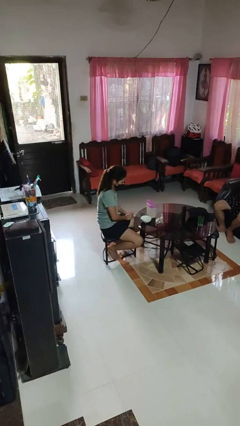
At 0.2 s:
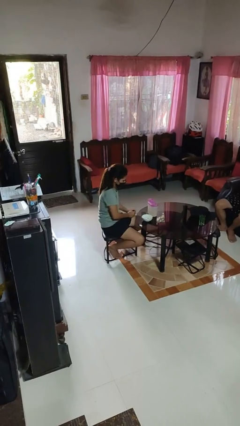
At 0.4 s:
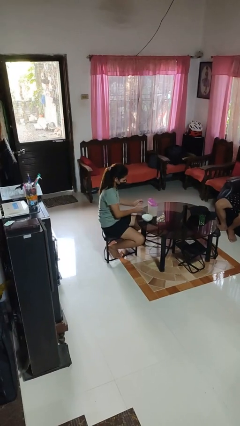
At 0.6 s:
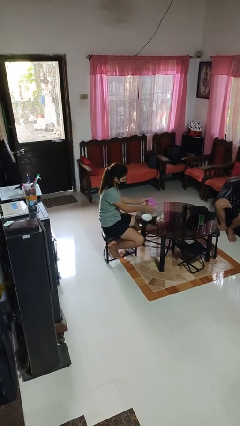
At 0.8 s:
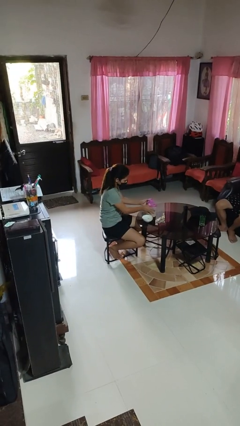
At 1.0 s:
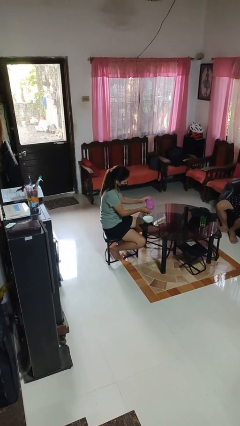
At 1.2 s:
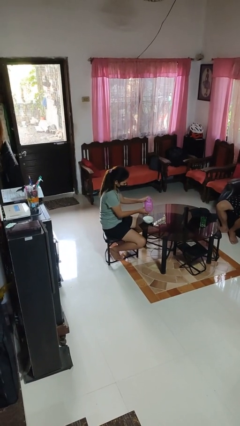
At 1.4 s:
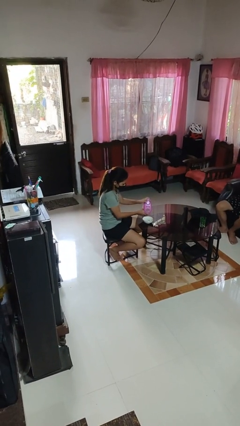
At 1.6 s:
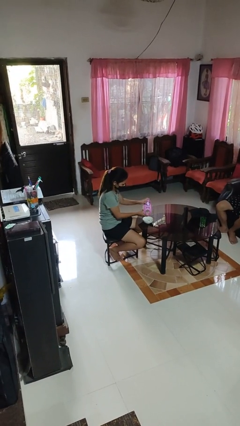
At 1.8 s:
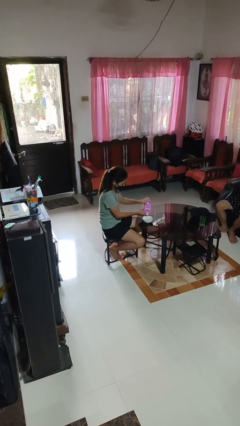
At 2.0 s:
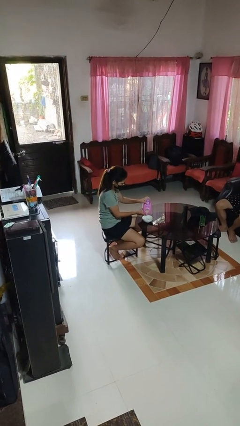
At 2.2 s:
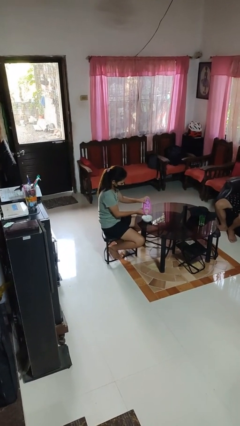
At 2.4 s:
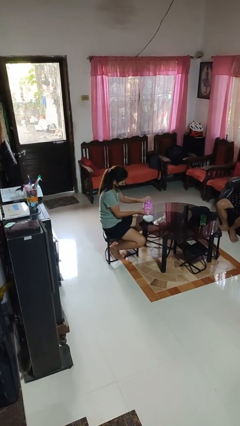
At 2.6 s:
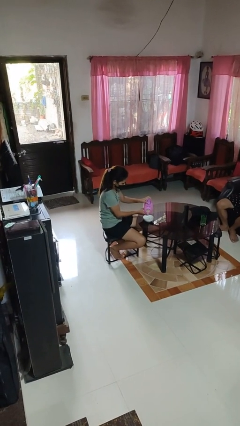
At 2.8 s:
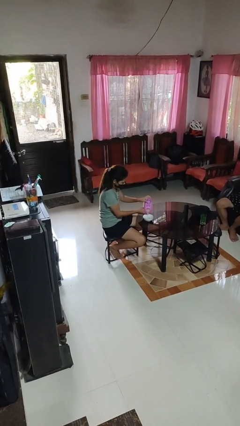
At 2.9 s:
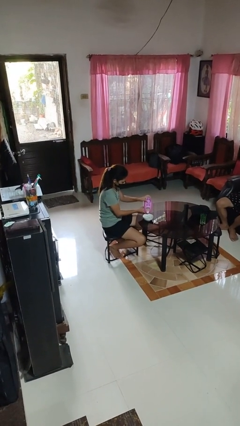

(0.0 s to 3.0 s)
person pours into bowl

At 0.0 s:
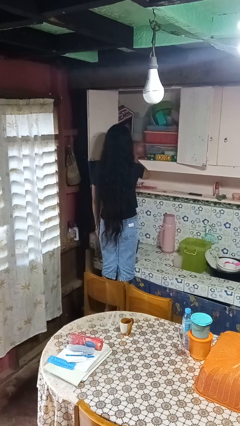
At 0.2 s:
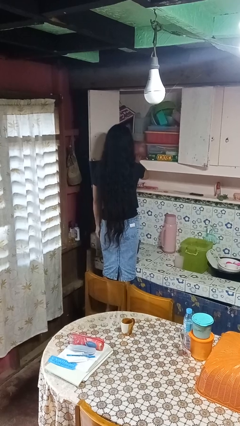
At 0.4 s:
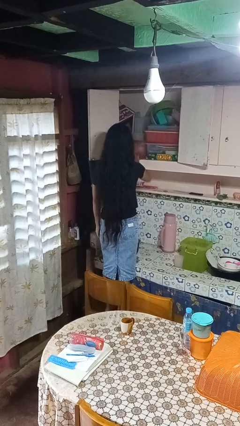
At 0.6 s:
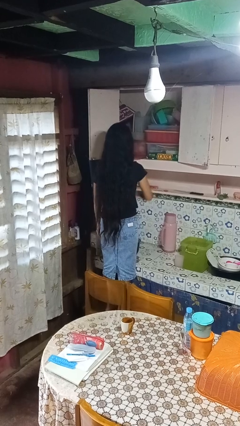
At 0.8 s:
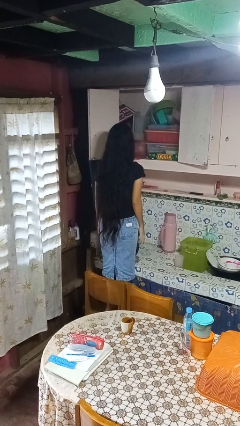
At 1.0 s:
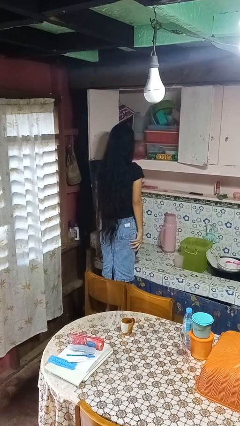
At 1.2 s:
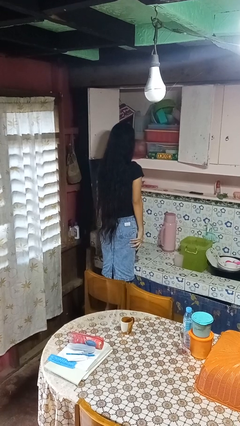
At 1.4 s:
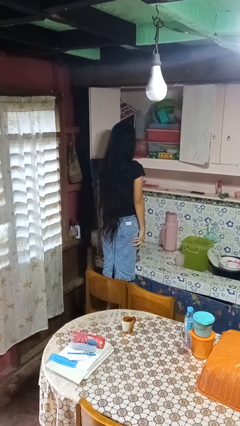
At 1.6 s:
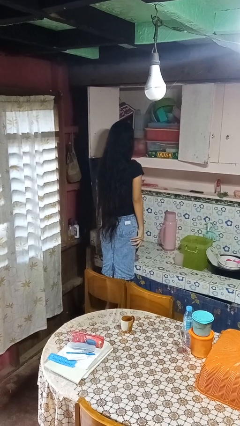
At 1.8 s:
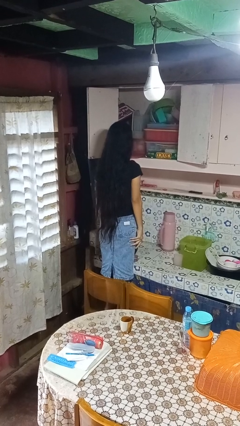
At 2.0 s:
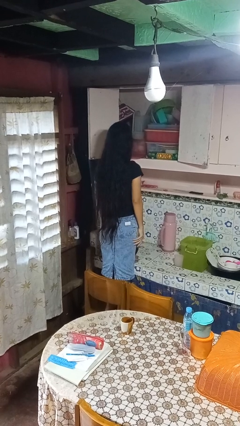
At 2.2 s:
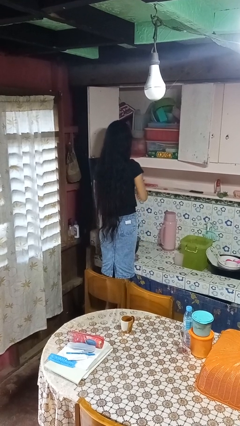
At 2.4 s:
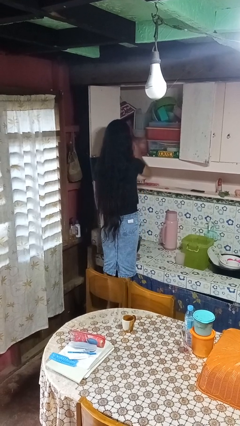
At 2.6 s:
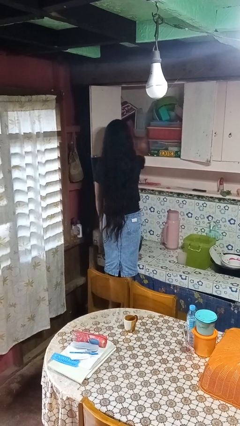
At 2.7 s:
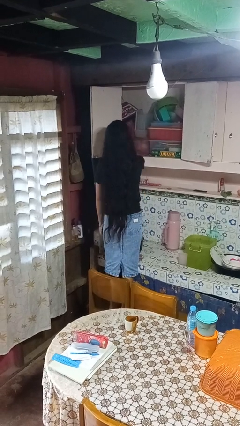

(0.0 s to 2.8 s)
person puts object in cabinet

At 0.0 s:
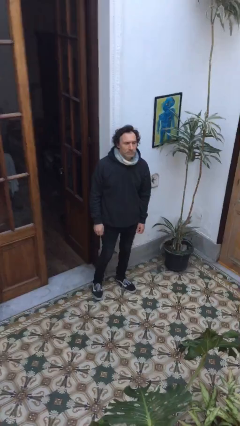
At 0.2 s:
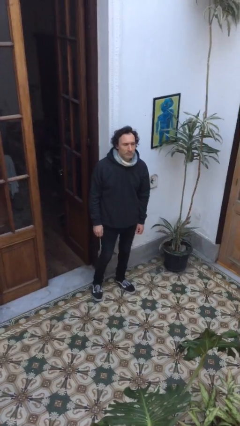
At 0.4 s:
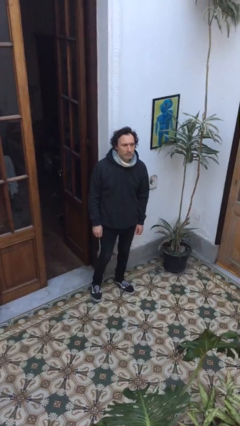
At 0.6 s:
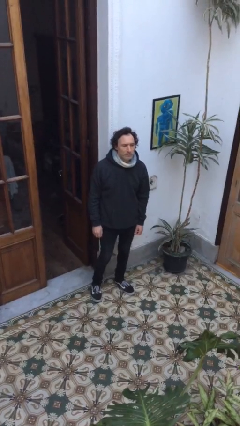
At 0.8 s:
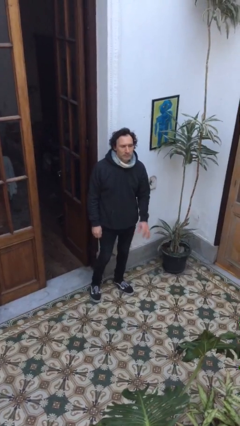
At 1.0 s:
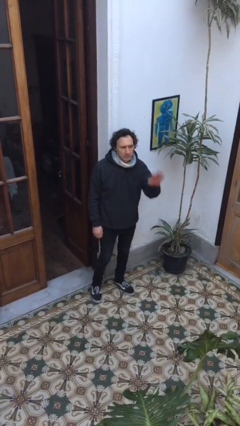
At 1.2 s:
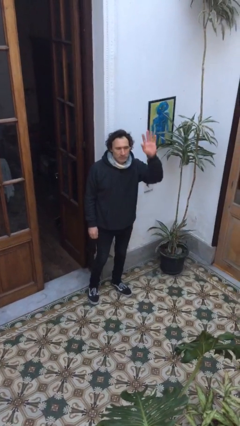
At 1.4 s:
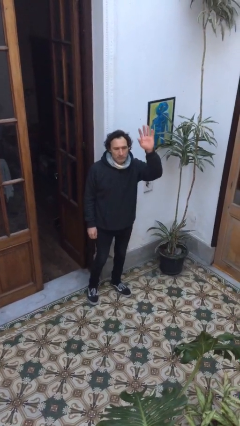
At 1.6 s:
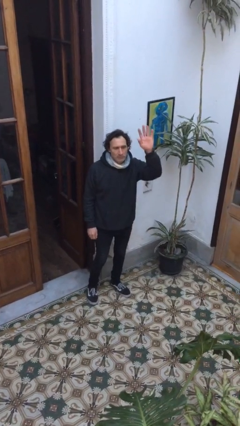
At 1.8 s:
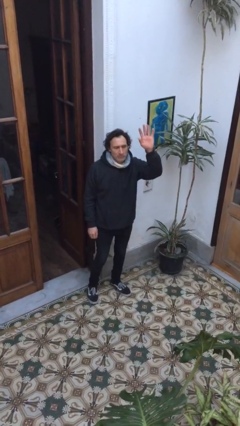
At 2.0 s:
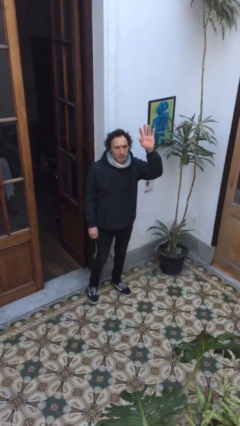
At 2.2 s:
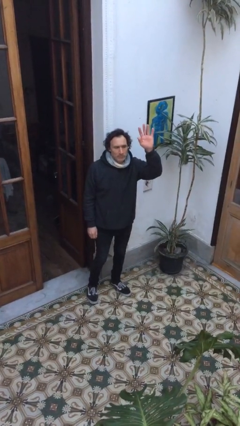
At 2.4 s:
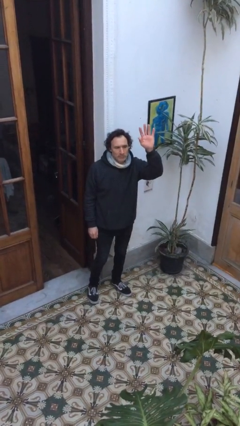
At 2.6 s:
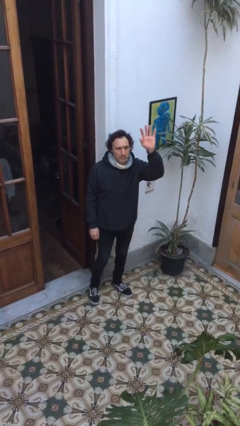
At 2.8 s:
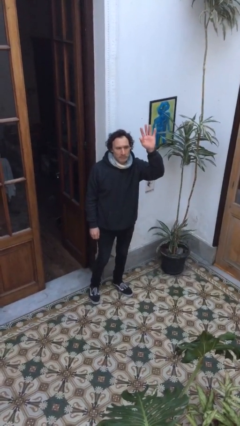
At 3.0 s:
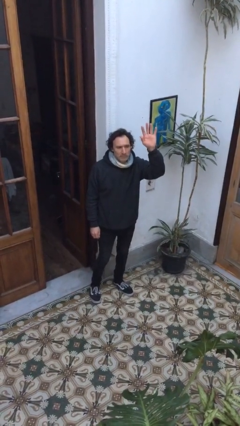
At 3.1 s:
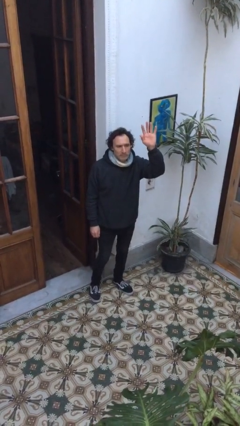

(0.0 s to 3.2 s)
person gestures raise hand

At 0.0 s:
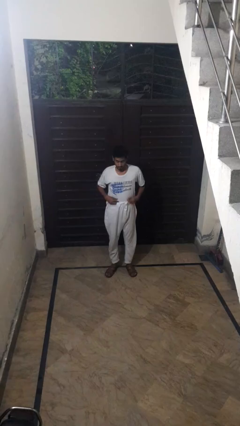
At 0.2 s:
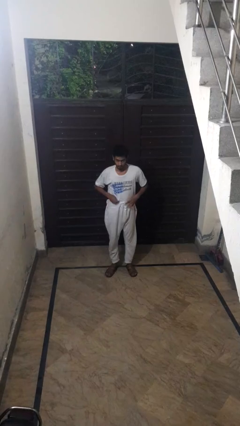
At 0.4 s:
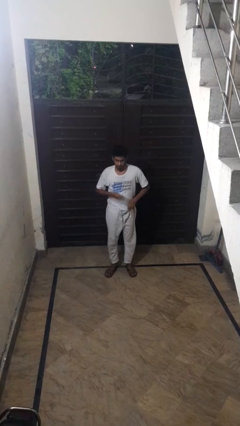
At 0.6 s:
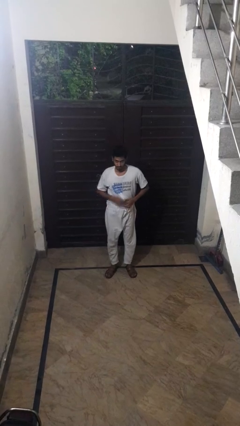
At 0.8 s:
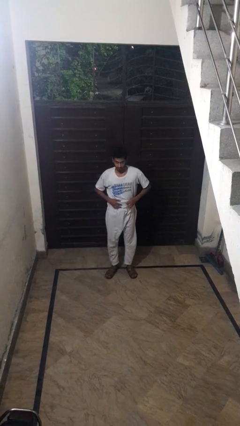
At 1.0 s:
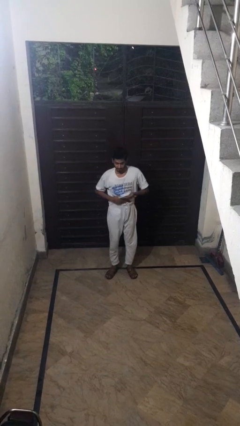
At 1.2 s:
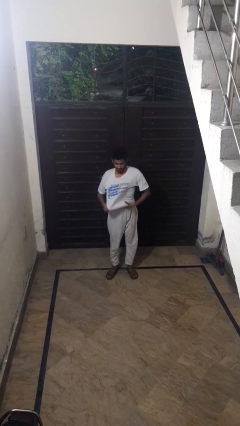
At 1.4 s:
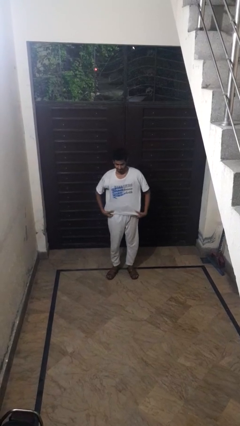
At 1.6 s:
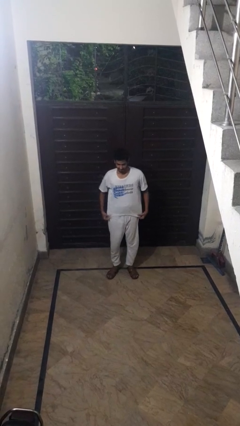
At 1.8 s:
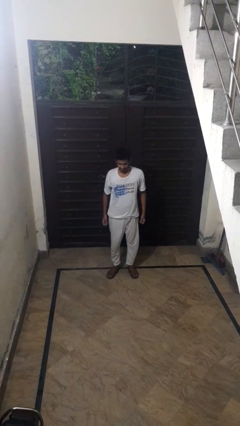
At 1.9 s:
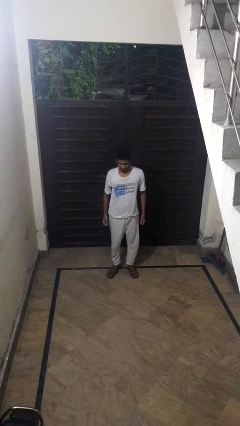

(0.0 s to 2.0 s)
person untucks shirt

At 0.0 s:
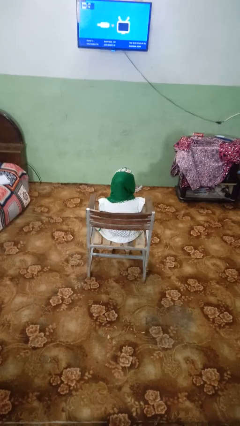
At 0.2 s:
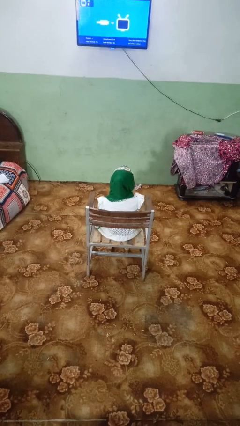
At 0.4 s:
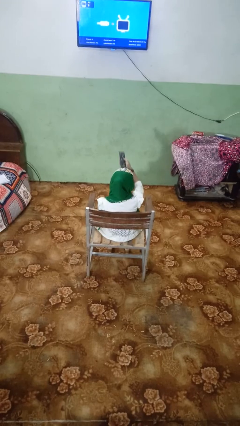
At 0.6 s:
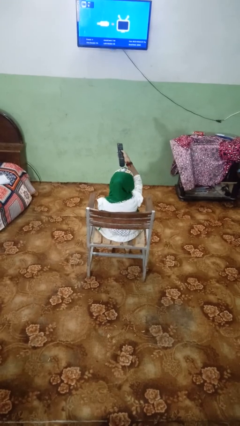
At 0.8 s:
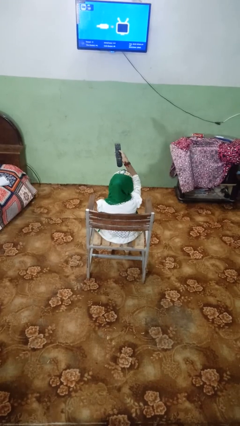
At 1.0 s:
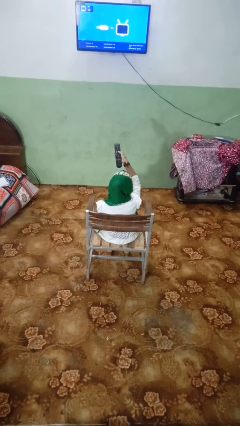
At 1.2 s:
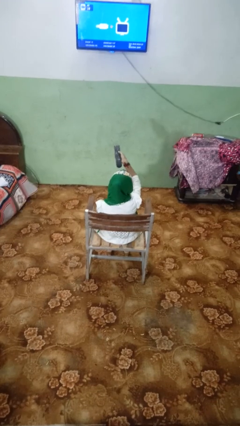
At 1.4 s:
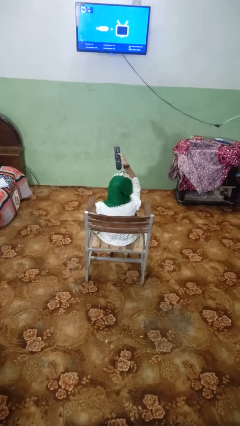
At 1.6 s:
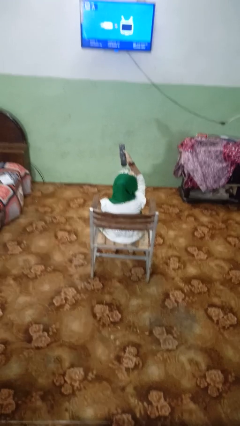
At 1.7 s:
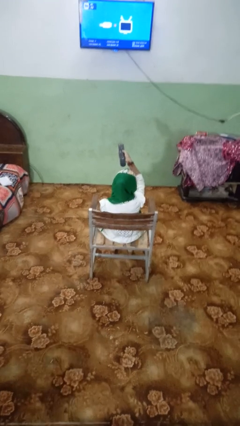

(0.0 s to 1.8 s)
person uses television remote

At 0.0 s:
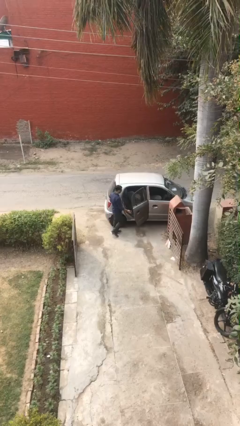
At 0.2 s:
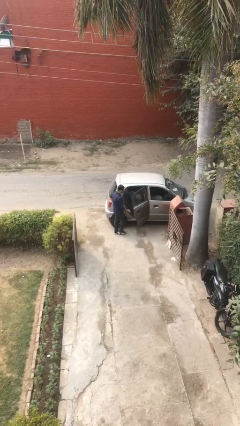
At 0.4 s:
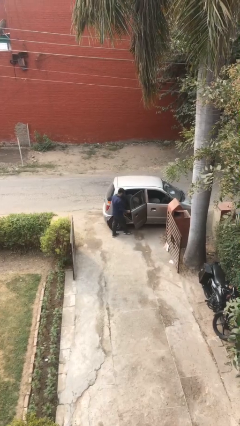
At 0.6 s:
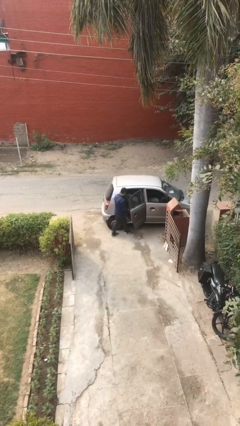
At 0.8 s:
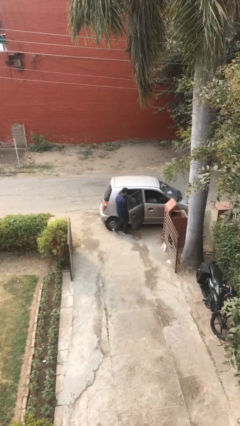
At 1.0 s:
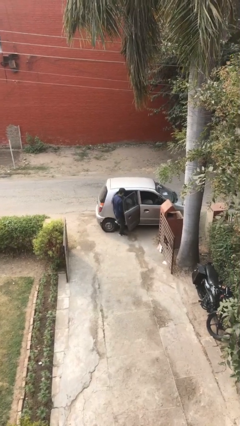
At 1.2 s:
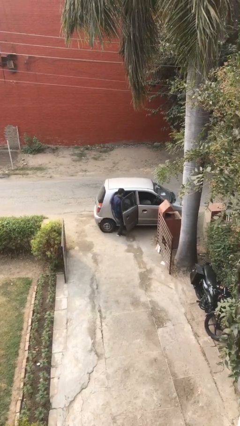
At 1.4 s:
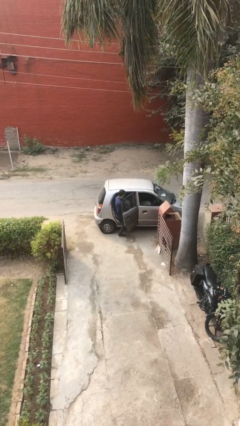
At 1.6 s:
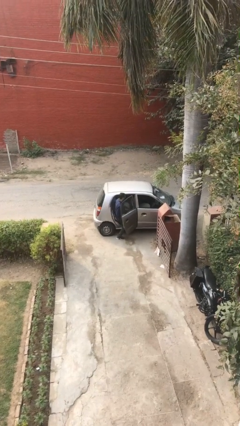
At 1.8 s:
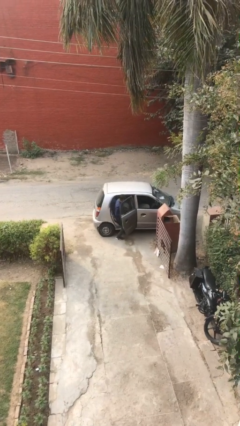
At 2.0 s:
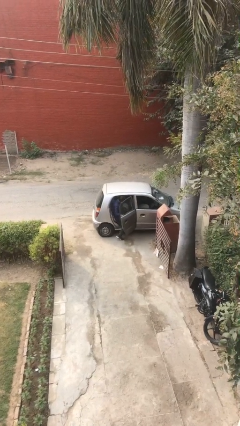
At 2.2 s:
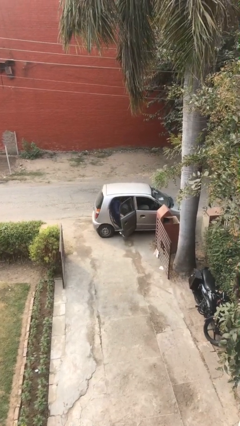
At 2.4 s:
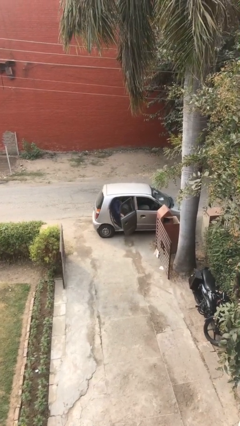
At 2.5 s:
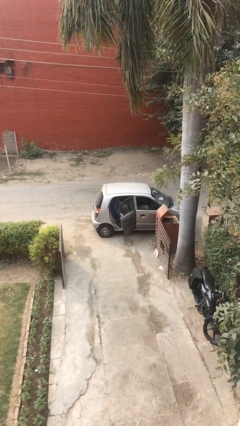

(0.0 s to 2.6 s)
person enters car

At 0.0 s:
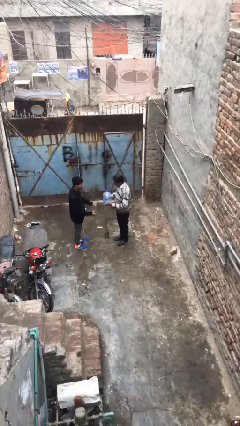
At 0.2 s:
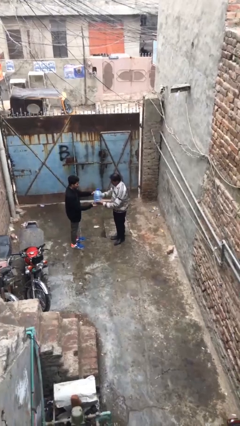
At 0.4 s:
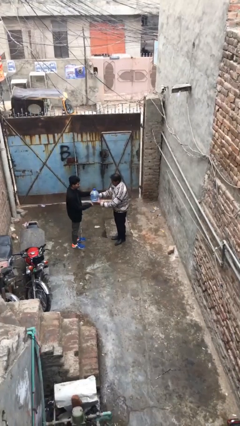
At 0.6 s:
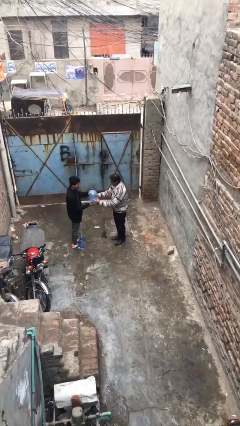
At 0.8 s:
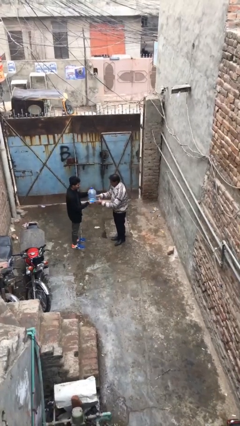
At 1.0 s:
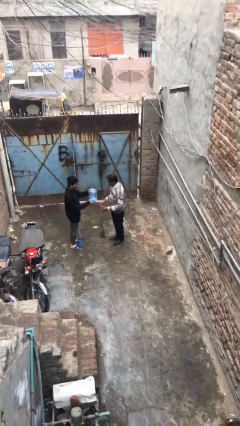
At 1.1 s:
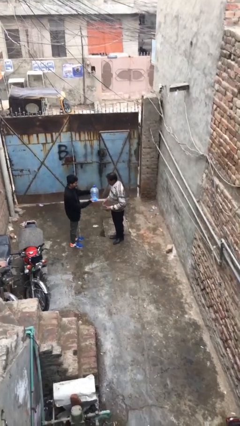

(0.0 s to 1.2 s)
person transfers object to person

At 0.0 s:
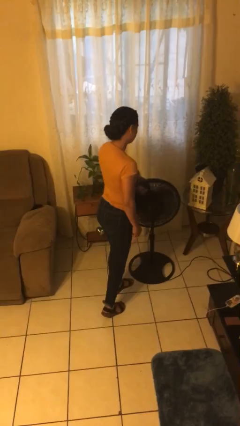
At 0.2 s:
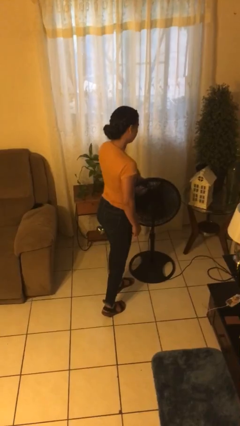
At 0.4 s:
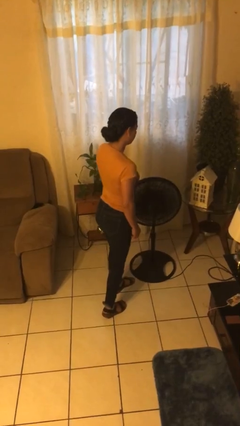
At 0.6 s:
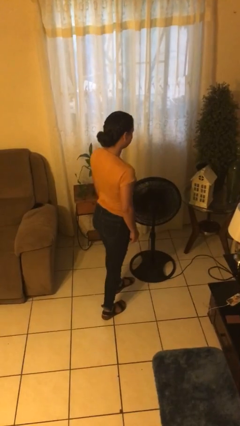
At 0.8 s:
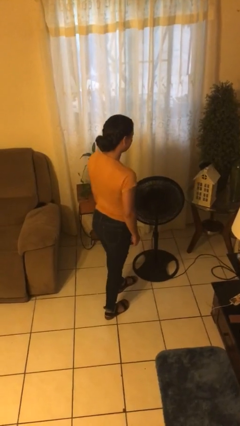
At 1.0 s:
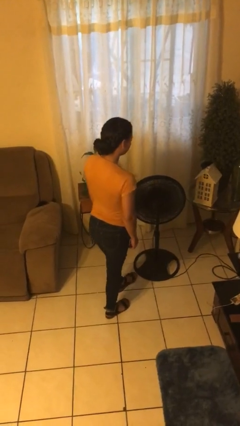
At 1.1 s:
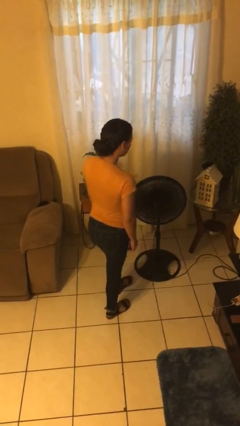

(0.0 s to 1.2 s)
person turns on fan
